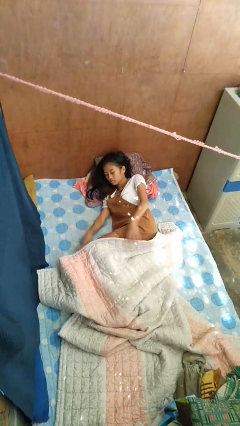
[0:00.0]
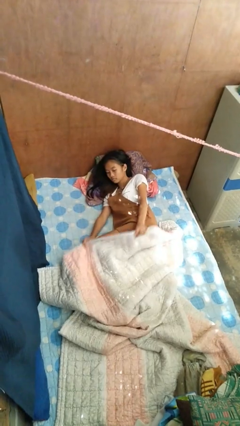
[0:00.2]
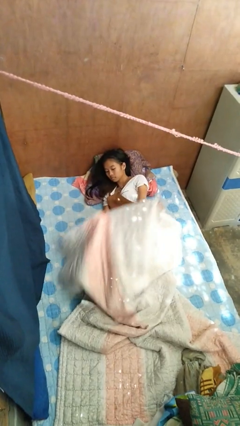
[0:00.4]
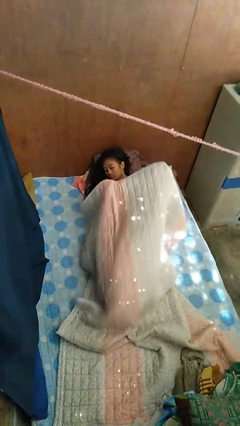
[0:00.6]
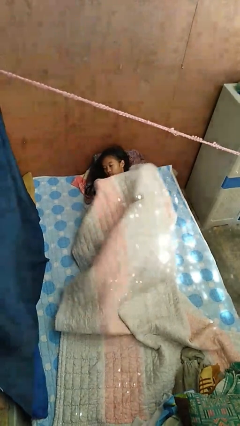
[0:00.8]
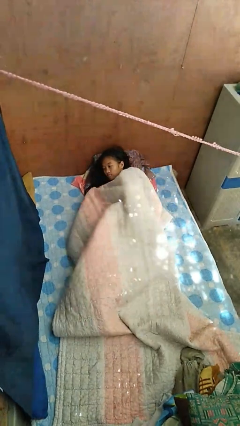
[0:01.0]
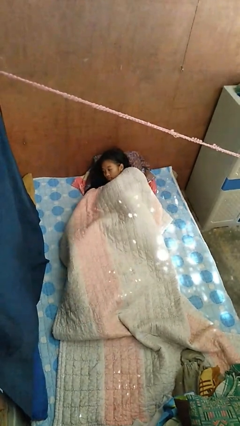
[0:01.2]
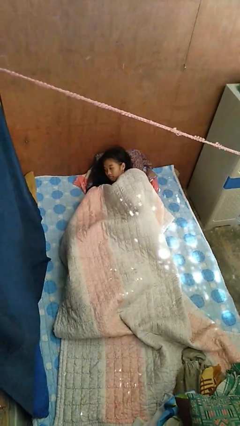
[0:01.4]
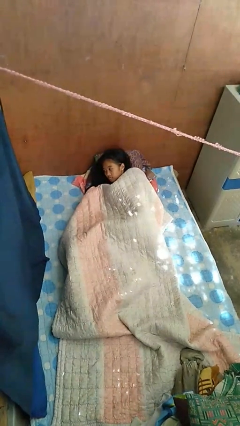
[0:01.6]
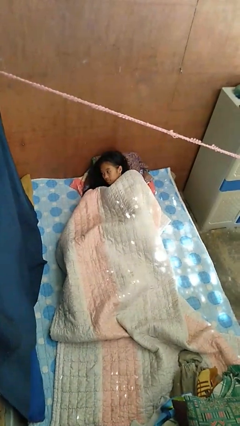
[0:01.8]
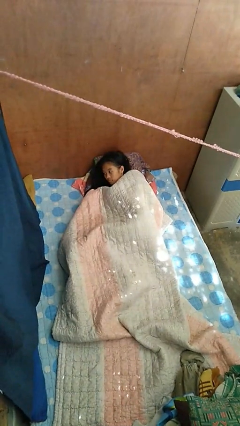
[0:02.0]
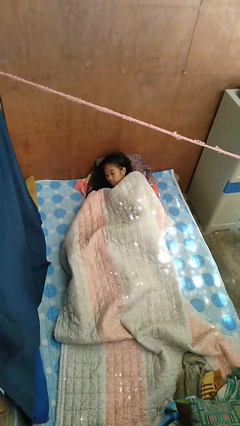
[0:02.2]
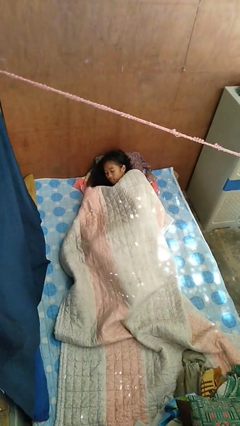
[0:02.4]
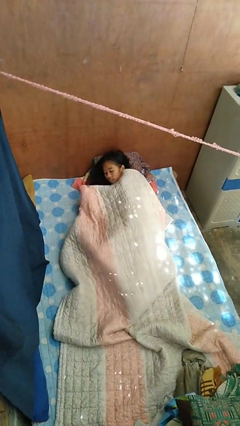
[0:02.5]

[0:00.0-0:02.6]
person covers with bedsheets

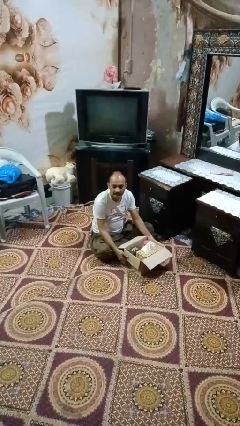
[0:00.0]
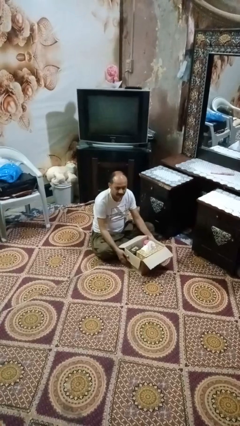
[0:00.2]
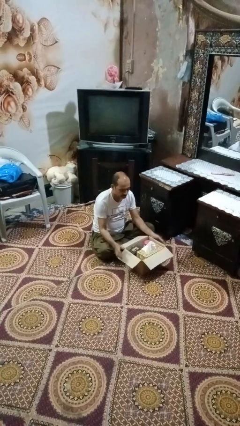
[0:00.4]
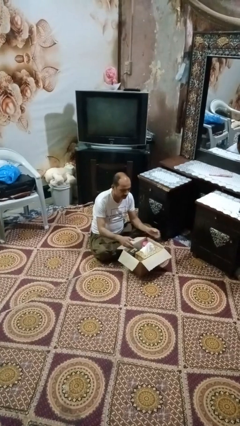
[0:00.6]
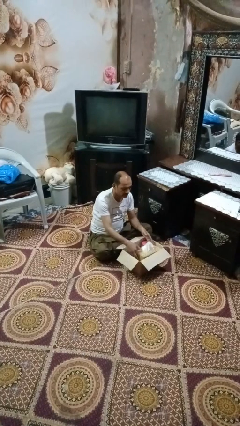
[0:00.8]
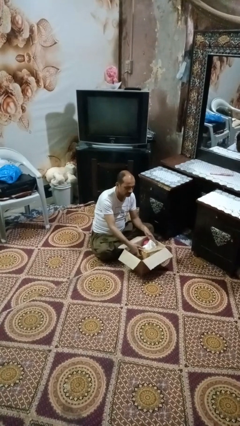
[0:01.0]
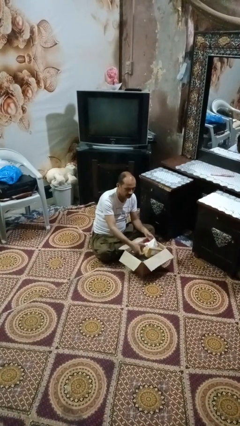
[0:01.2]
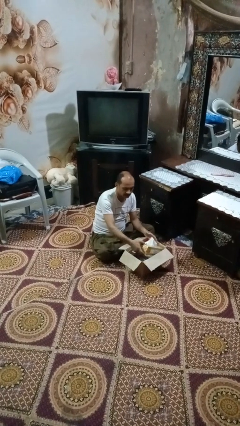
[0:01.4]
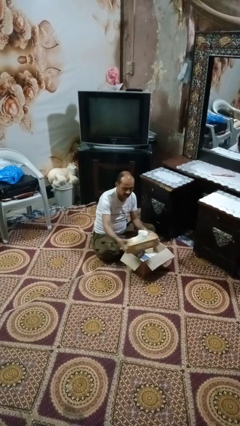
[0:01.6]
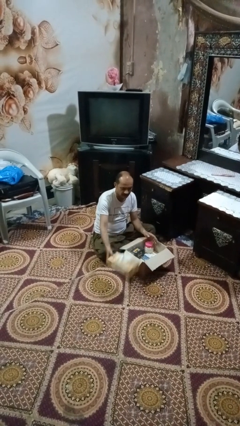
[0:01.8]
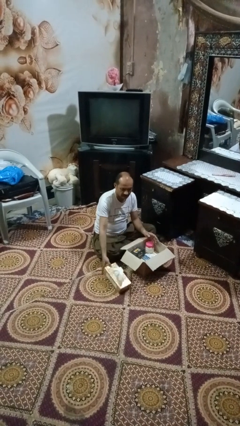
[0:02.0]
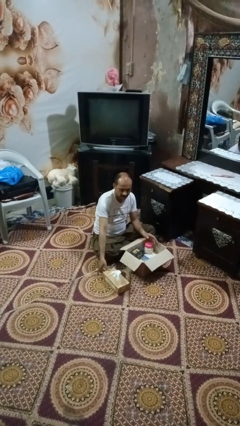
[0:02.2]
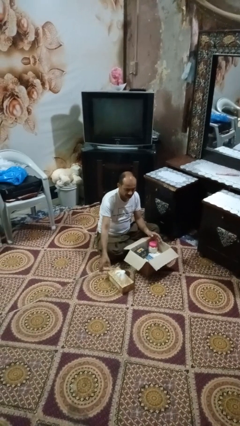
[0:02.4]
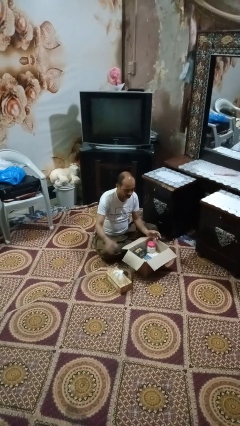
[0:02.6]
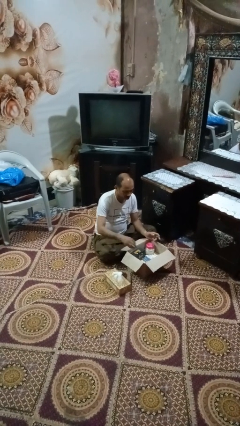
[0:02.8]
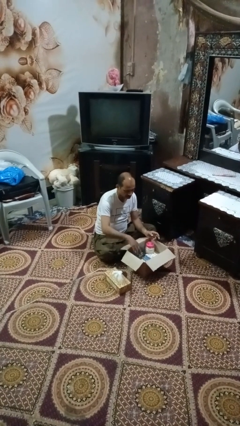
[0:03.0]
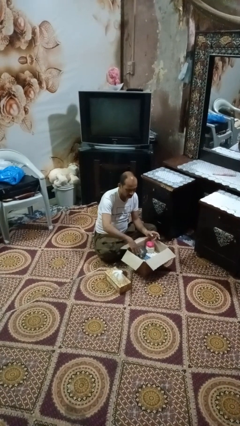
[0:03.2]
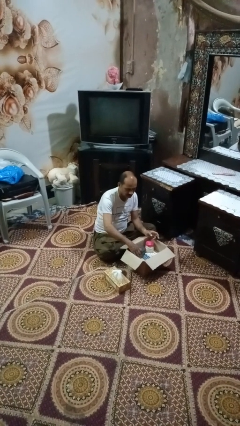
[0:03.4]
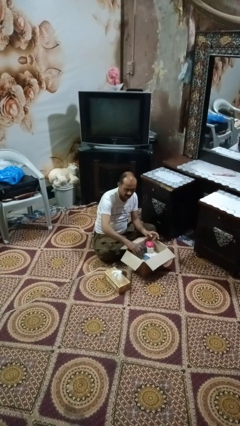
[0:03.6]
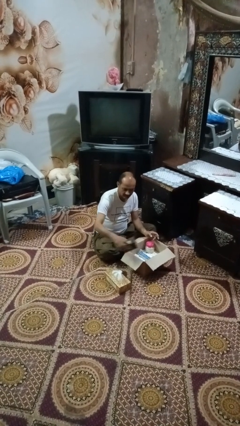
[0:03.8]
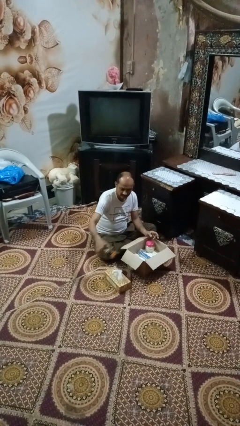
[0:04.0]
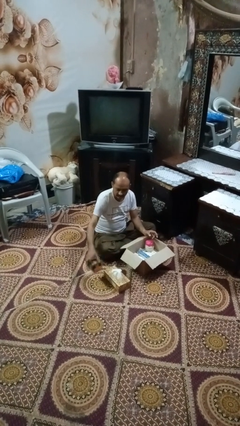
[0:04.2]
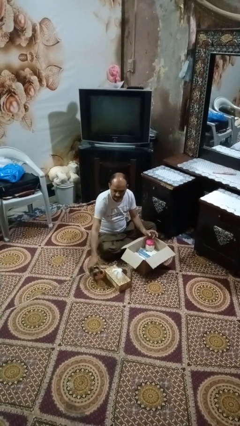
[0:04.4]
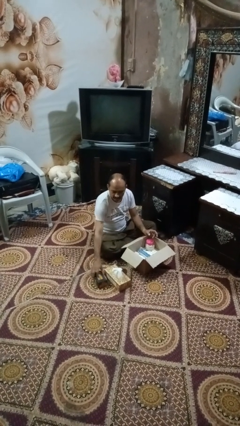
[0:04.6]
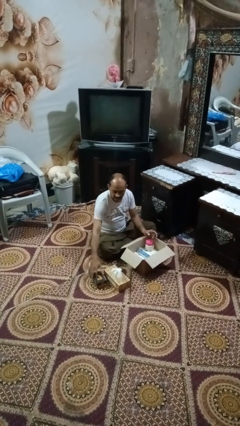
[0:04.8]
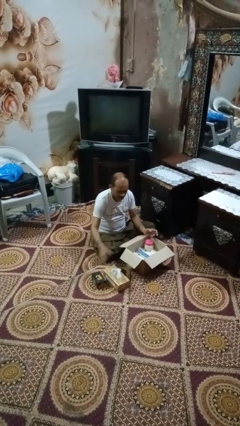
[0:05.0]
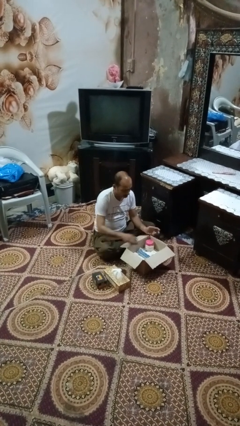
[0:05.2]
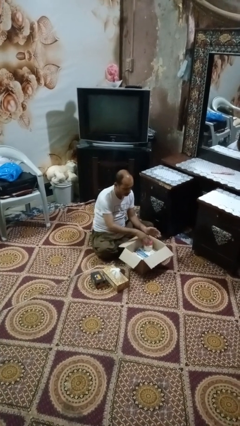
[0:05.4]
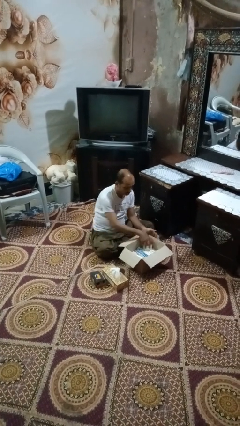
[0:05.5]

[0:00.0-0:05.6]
person takes object from box

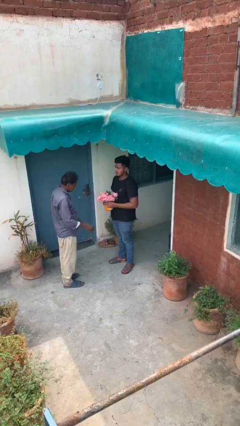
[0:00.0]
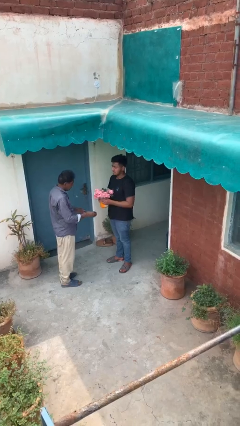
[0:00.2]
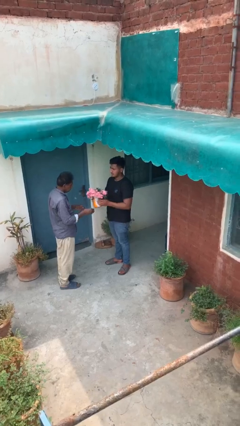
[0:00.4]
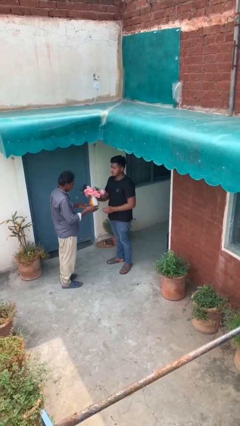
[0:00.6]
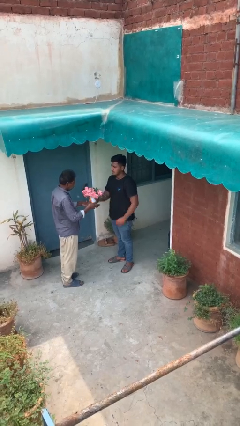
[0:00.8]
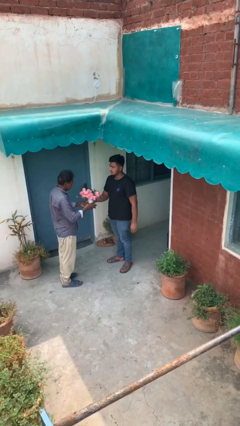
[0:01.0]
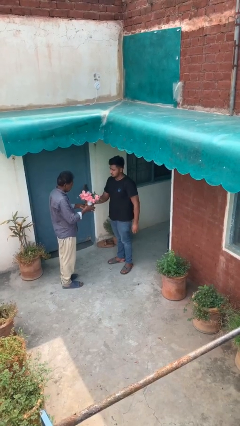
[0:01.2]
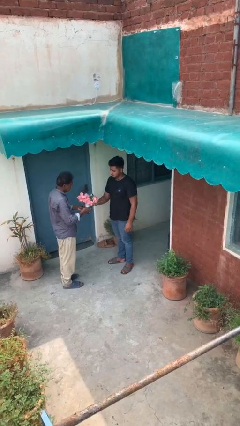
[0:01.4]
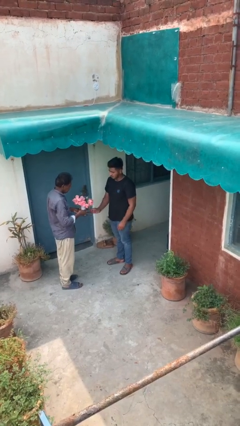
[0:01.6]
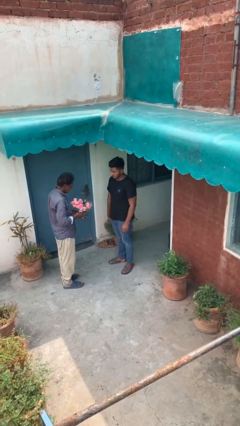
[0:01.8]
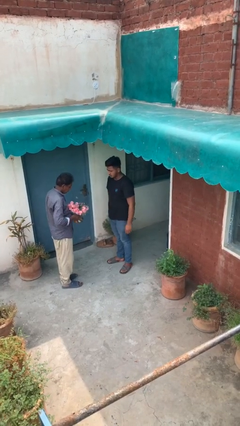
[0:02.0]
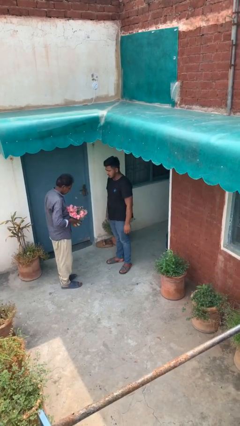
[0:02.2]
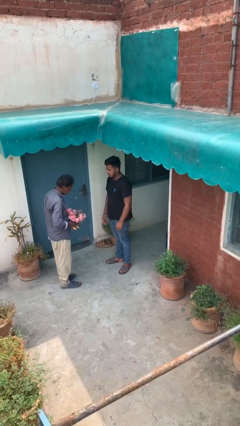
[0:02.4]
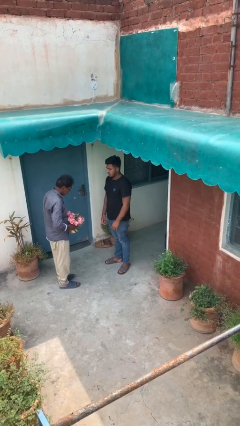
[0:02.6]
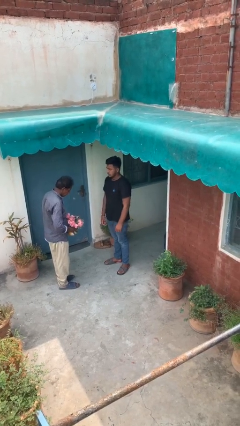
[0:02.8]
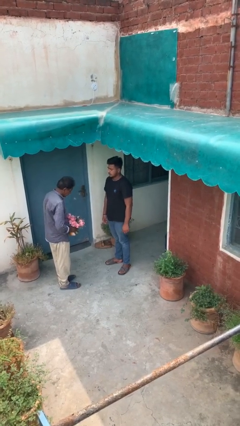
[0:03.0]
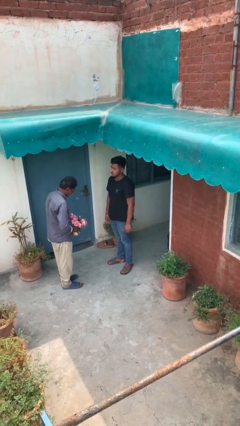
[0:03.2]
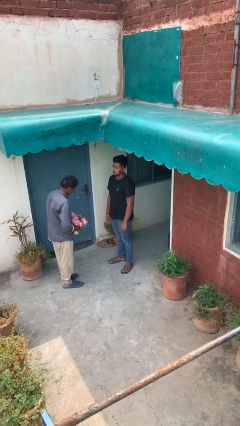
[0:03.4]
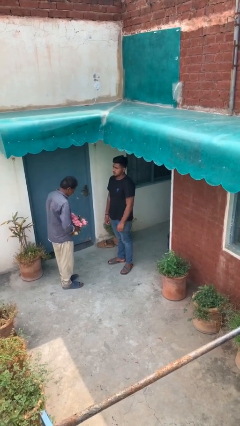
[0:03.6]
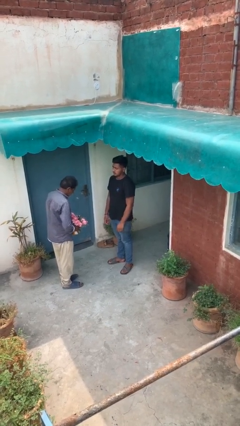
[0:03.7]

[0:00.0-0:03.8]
person transfers object to person

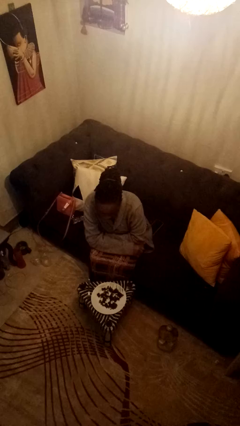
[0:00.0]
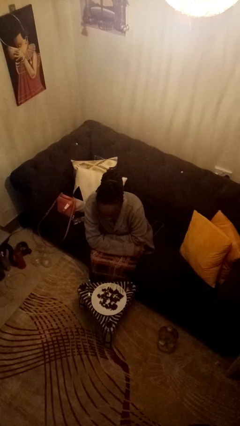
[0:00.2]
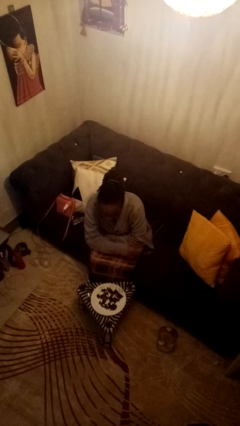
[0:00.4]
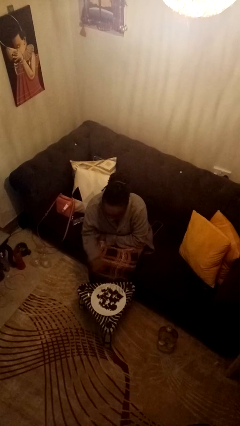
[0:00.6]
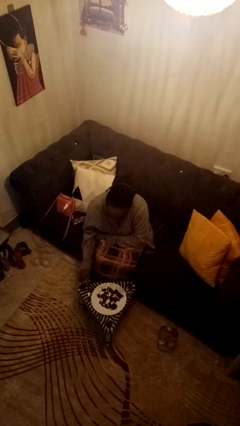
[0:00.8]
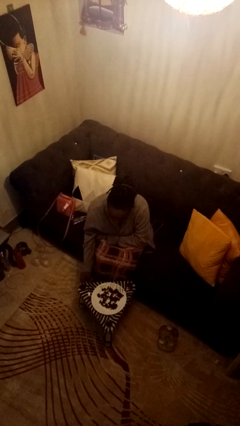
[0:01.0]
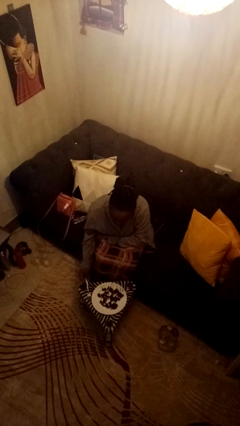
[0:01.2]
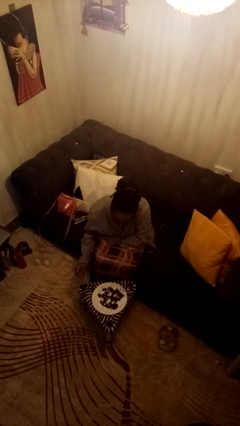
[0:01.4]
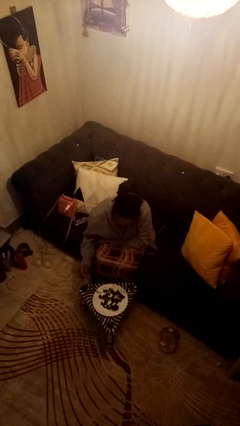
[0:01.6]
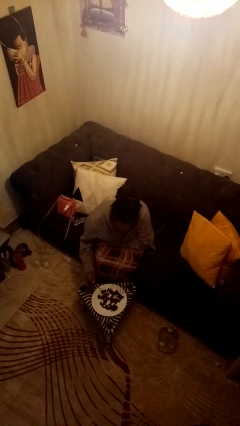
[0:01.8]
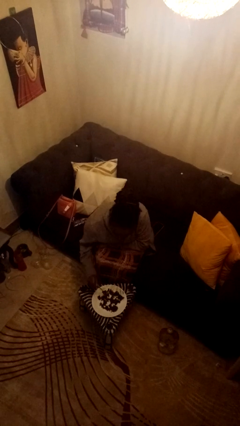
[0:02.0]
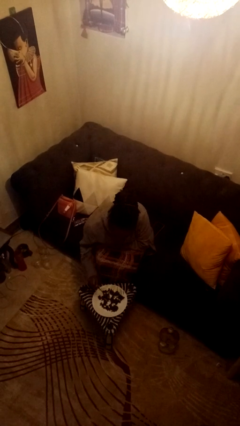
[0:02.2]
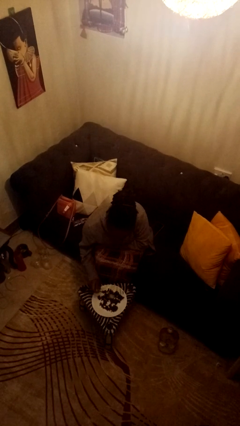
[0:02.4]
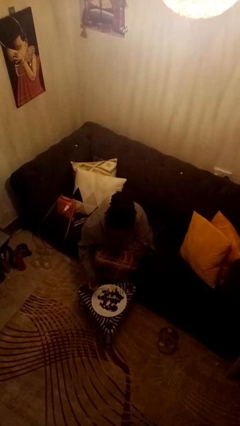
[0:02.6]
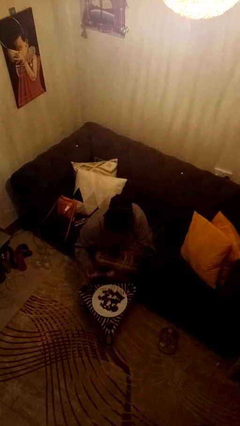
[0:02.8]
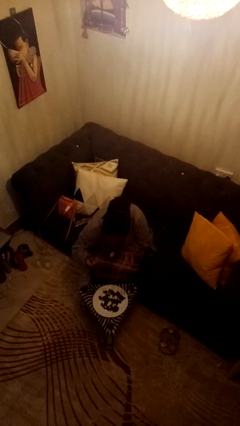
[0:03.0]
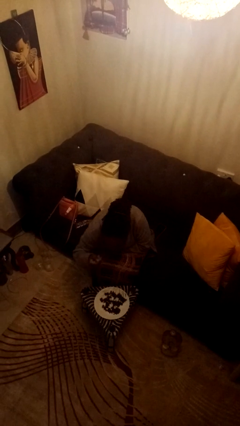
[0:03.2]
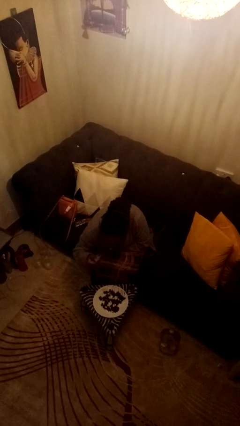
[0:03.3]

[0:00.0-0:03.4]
person eats with utensil

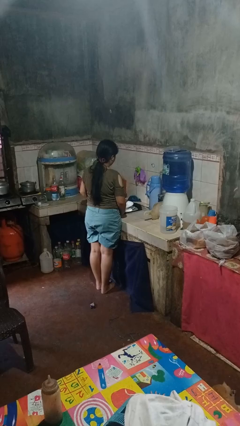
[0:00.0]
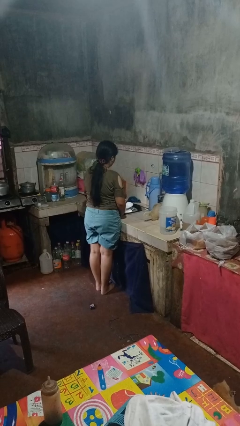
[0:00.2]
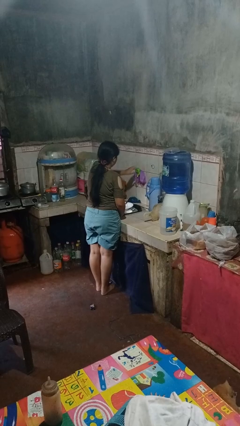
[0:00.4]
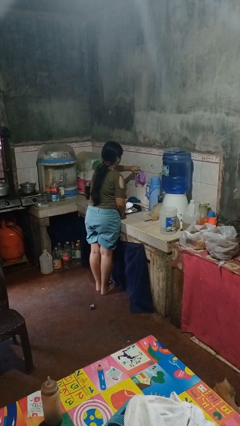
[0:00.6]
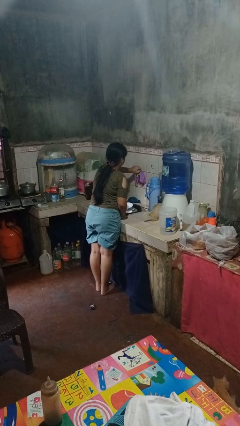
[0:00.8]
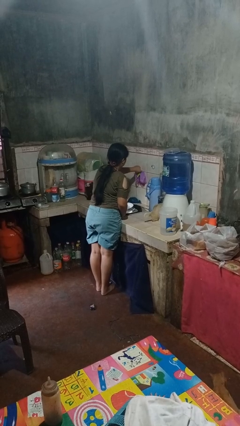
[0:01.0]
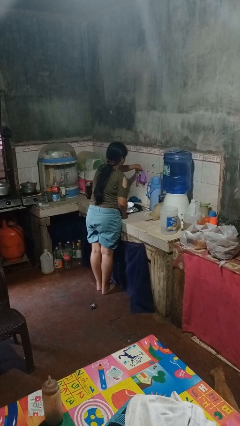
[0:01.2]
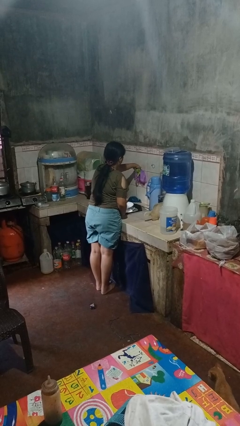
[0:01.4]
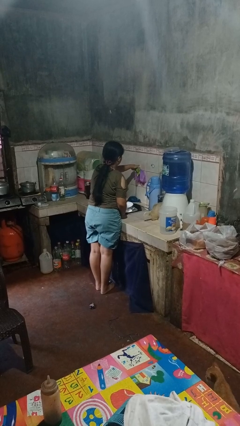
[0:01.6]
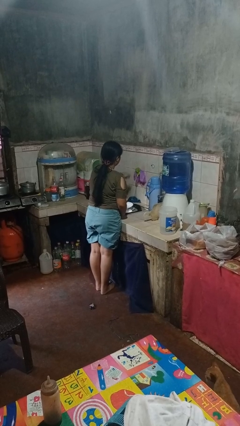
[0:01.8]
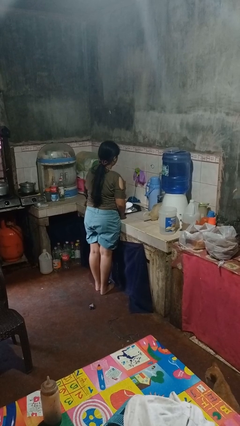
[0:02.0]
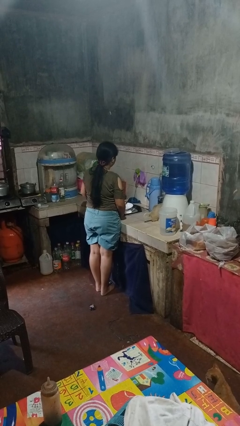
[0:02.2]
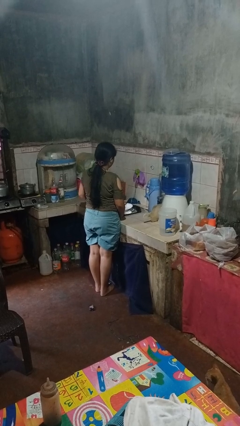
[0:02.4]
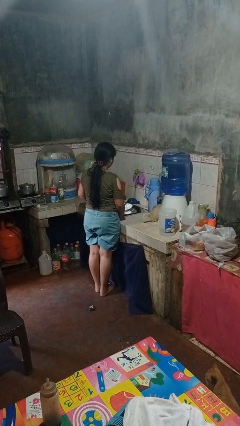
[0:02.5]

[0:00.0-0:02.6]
person turns on faucet
